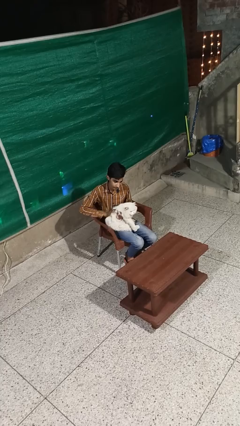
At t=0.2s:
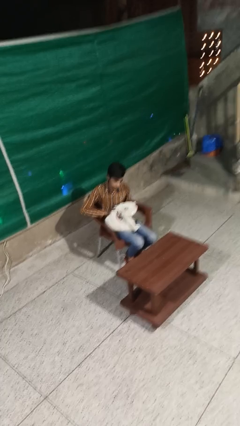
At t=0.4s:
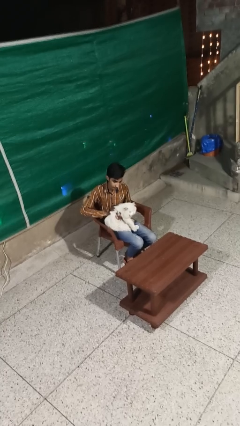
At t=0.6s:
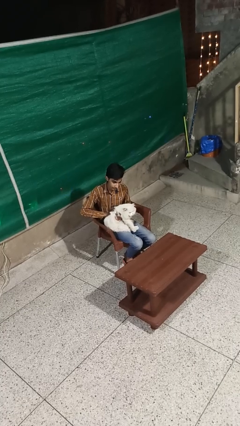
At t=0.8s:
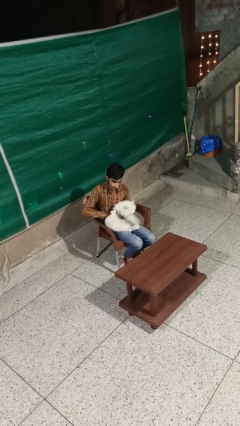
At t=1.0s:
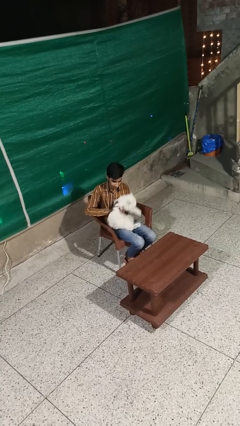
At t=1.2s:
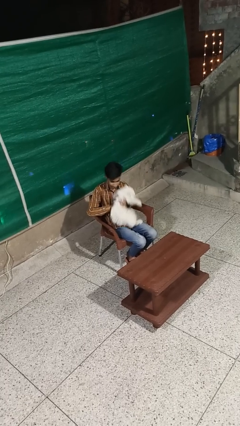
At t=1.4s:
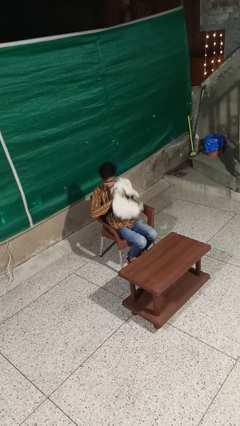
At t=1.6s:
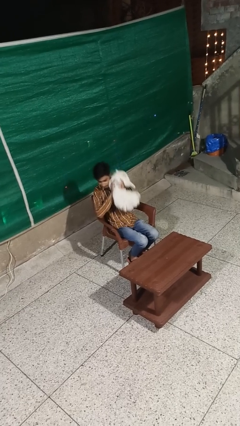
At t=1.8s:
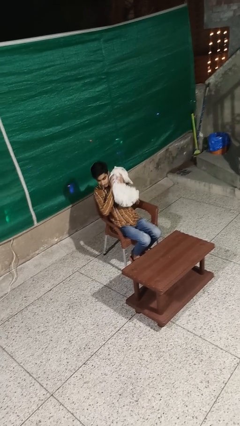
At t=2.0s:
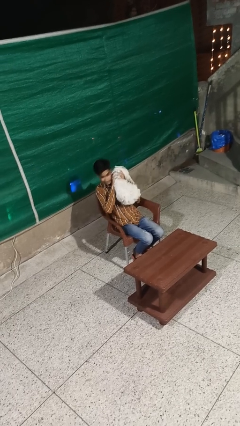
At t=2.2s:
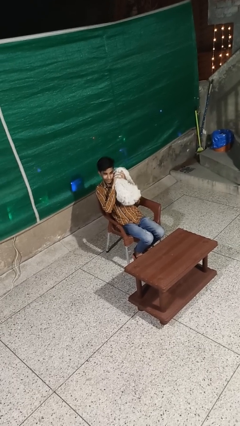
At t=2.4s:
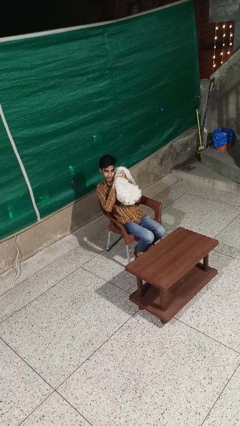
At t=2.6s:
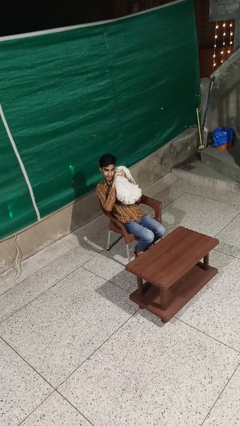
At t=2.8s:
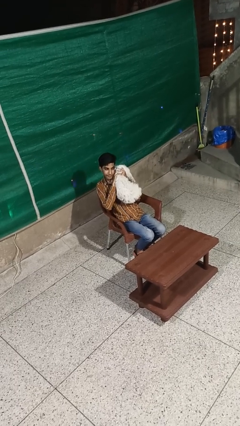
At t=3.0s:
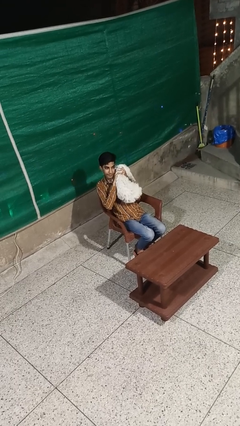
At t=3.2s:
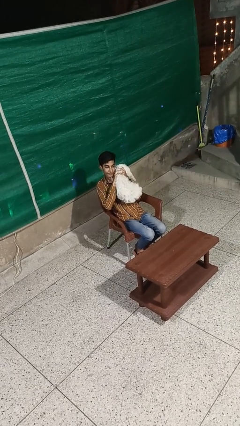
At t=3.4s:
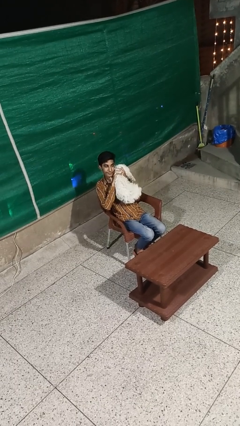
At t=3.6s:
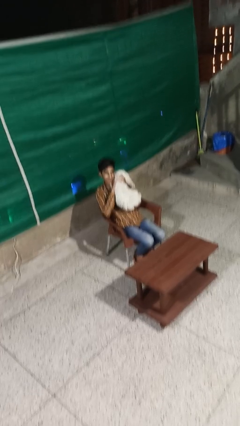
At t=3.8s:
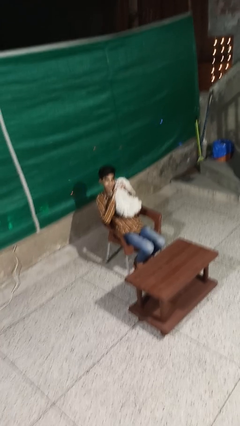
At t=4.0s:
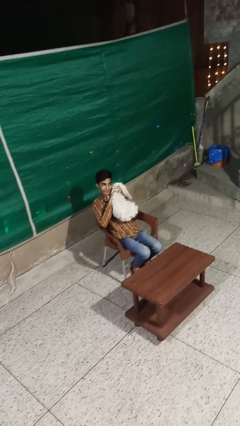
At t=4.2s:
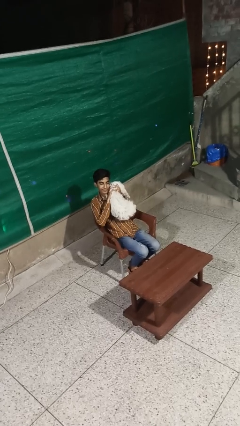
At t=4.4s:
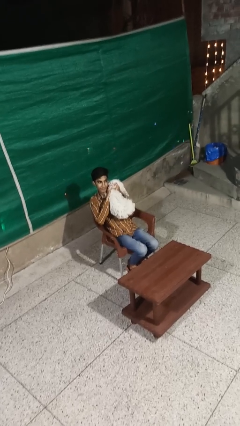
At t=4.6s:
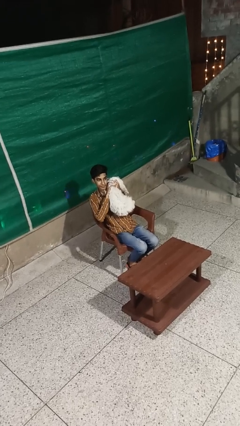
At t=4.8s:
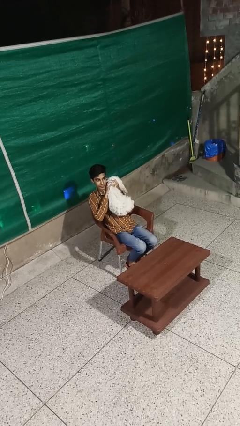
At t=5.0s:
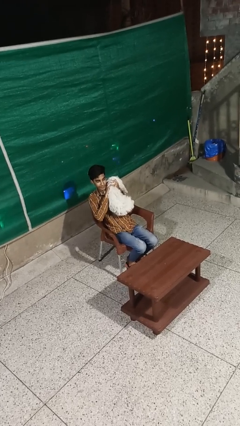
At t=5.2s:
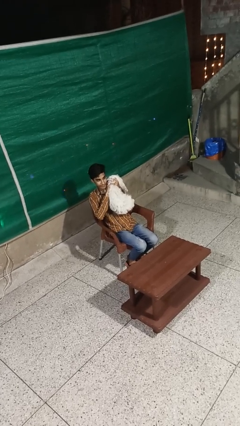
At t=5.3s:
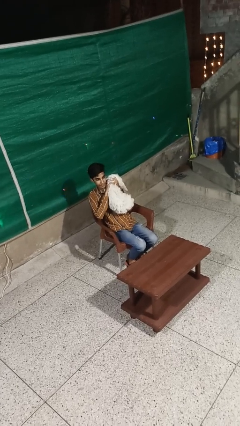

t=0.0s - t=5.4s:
person hugs cat

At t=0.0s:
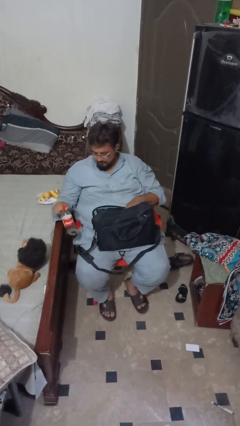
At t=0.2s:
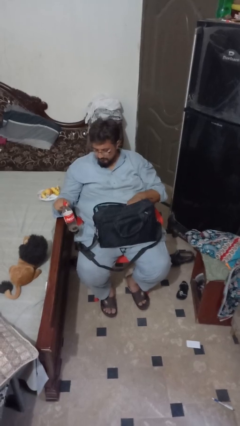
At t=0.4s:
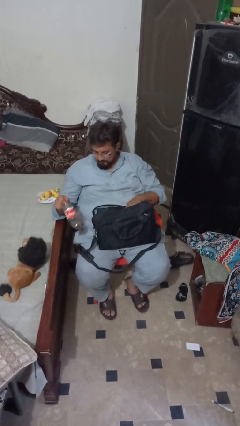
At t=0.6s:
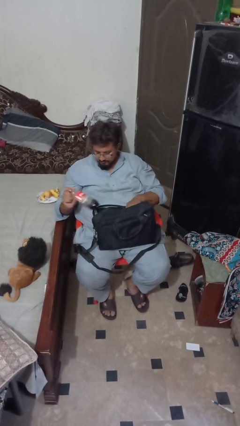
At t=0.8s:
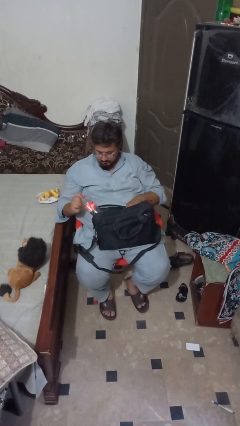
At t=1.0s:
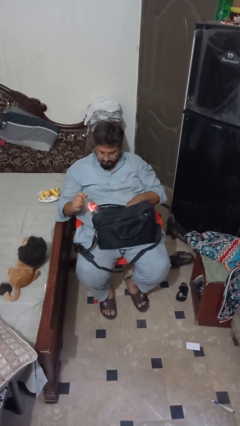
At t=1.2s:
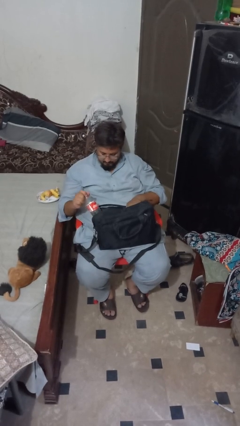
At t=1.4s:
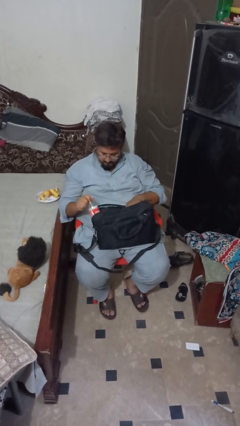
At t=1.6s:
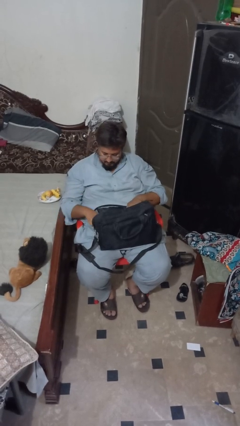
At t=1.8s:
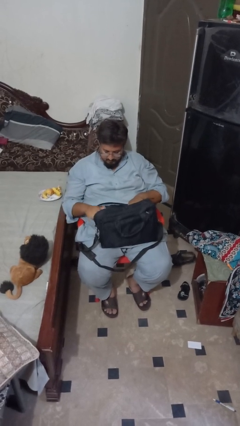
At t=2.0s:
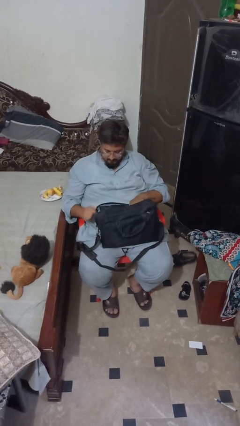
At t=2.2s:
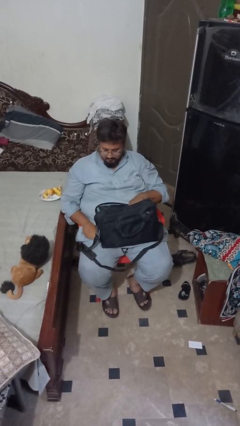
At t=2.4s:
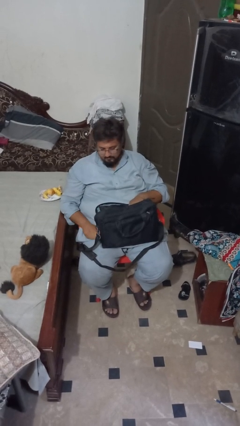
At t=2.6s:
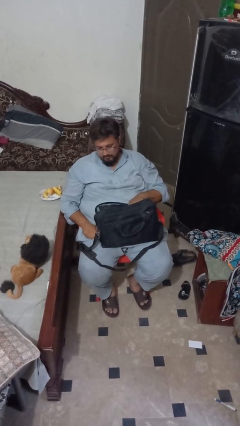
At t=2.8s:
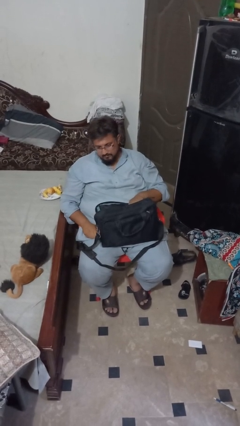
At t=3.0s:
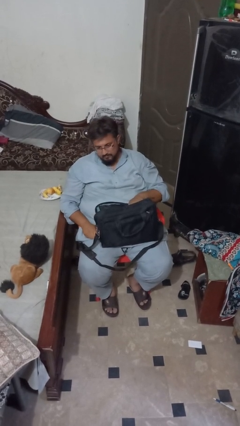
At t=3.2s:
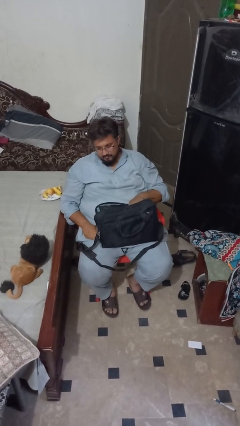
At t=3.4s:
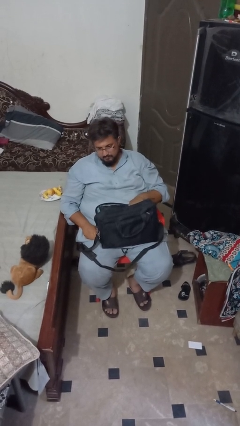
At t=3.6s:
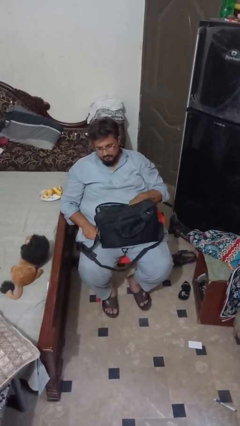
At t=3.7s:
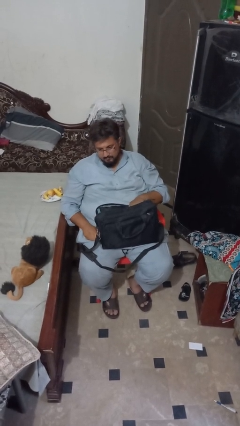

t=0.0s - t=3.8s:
person puts object into bag

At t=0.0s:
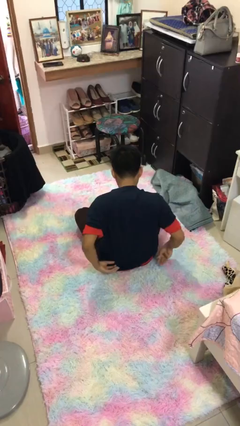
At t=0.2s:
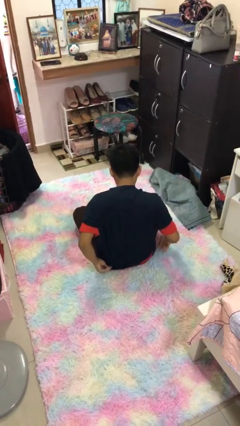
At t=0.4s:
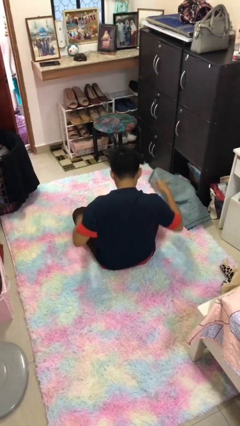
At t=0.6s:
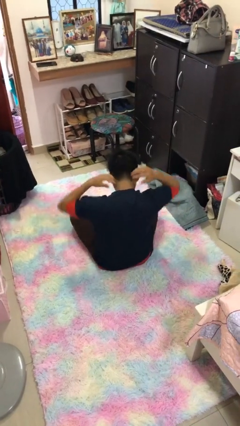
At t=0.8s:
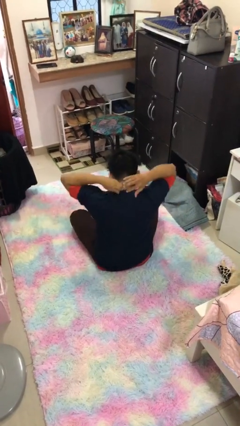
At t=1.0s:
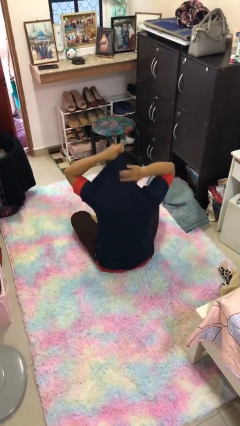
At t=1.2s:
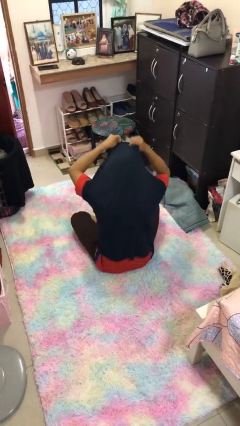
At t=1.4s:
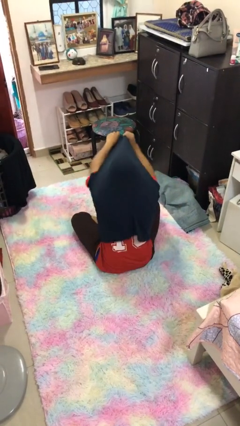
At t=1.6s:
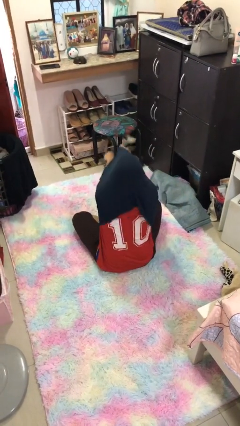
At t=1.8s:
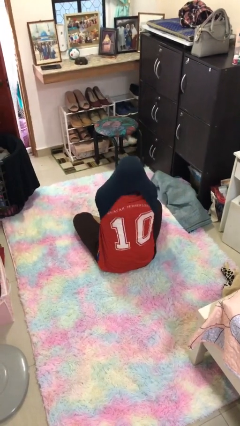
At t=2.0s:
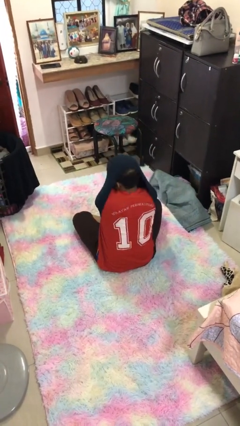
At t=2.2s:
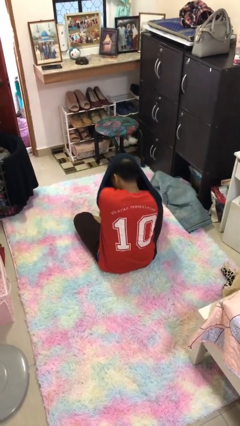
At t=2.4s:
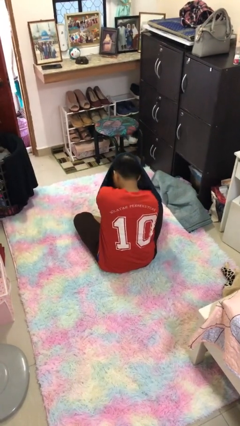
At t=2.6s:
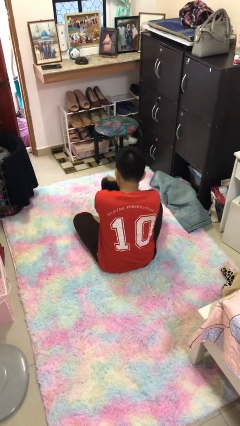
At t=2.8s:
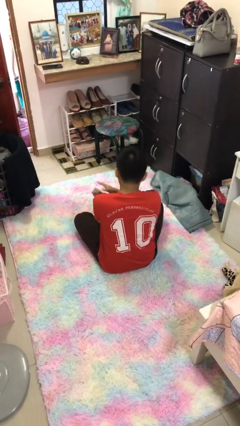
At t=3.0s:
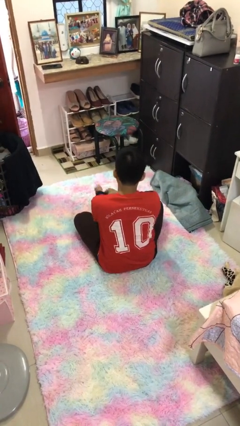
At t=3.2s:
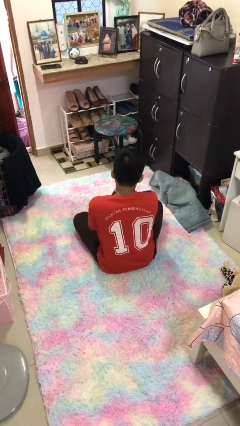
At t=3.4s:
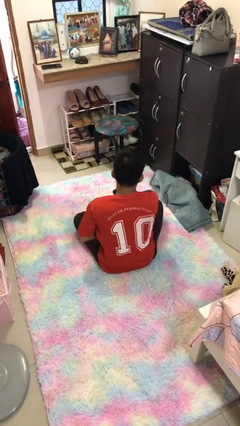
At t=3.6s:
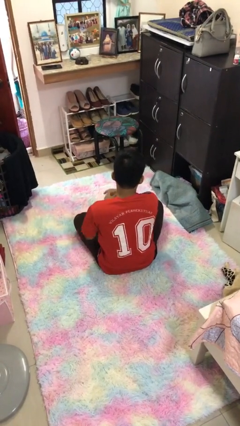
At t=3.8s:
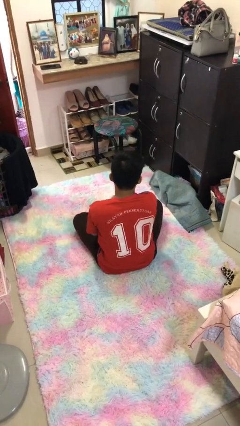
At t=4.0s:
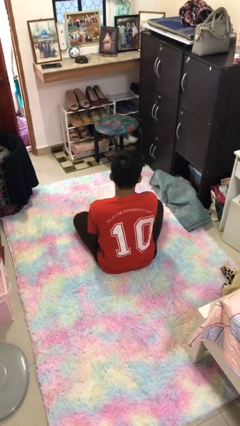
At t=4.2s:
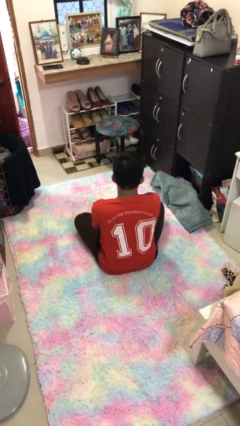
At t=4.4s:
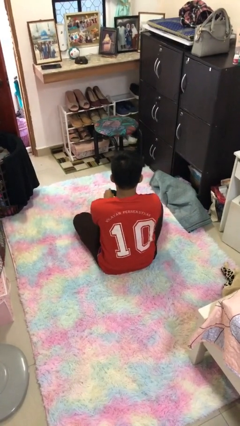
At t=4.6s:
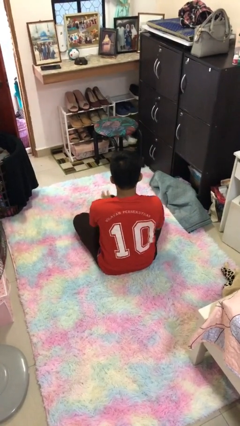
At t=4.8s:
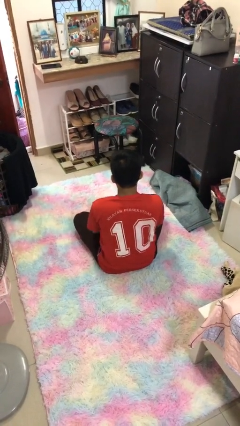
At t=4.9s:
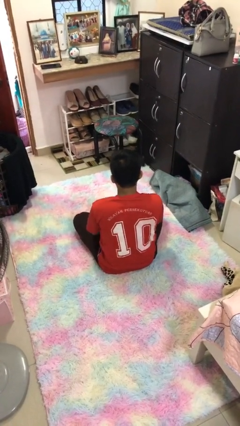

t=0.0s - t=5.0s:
person takes off shirt

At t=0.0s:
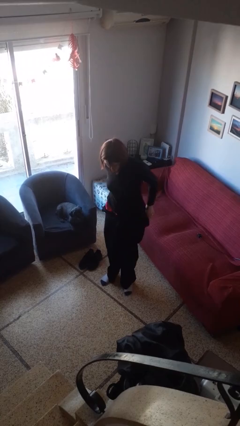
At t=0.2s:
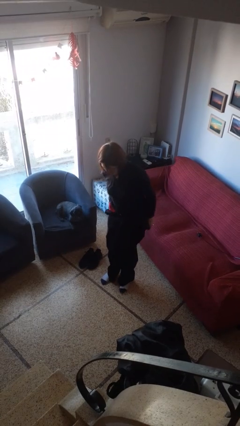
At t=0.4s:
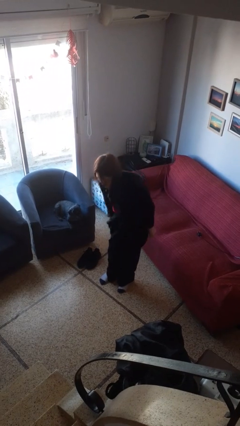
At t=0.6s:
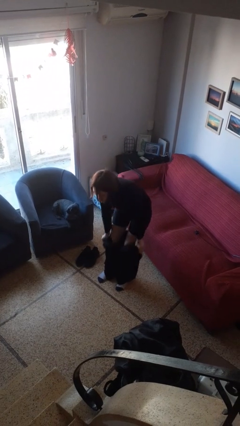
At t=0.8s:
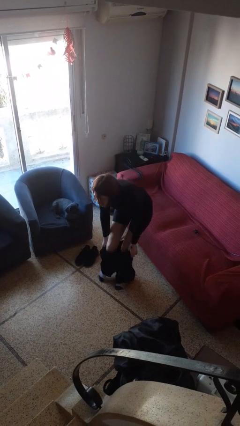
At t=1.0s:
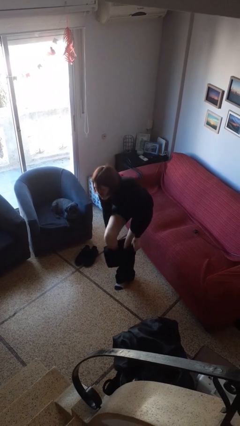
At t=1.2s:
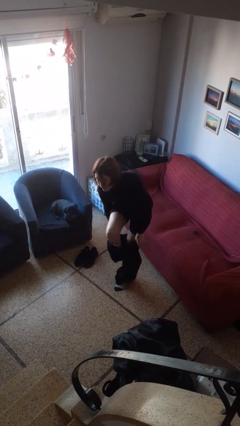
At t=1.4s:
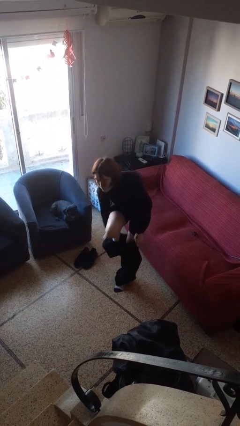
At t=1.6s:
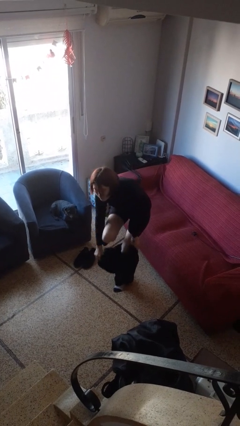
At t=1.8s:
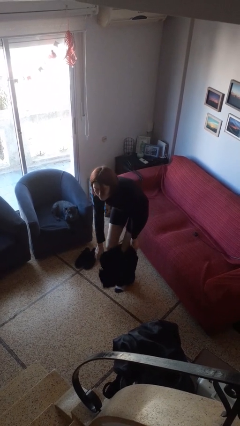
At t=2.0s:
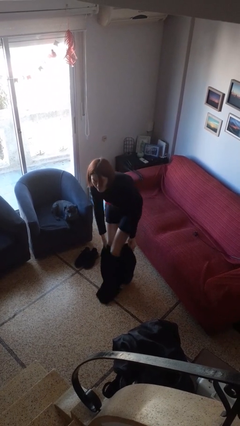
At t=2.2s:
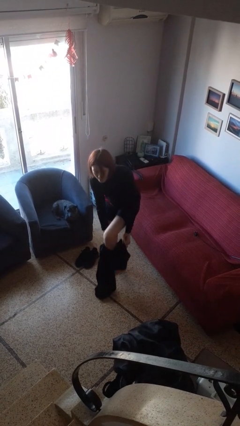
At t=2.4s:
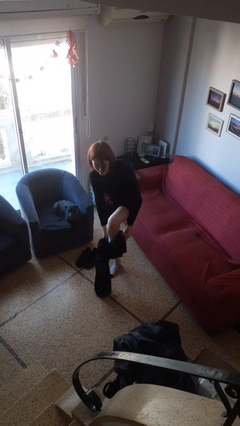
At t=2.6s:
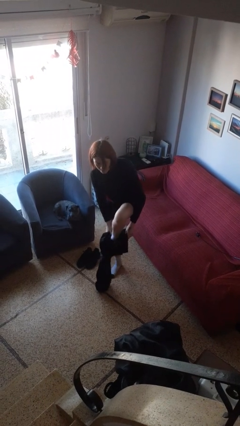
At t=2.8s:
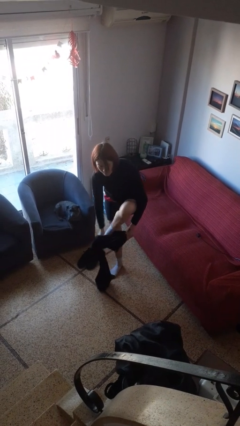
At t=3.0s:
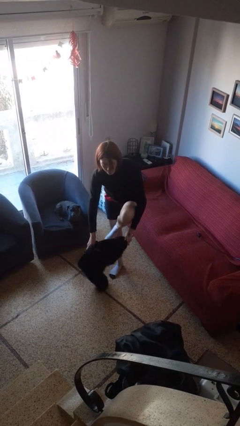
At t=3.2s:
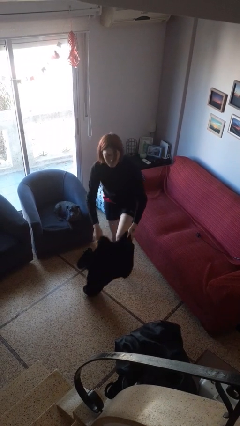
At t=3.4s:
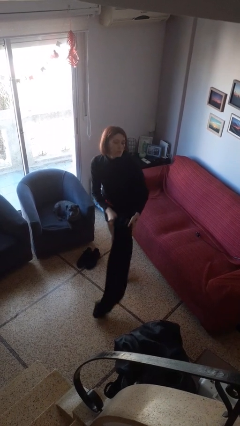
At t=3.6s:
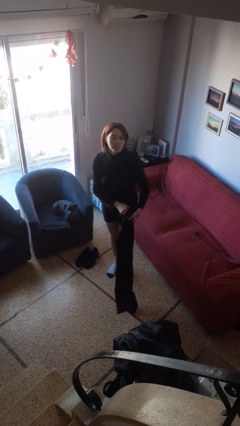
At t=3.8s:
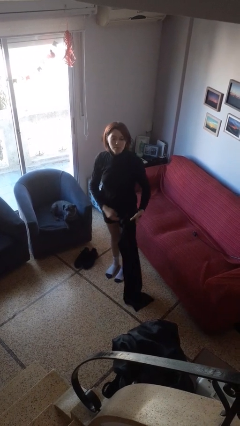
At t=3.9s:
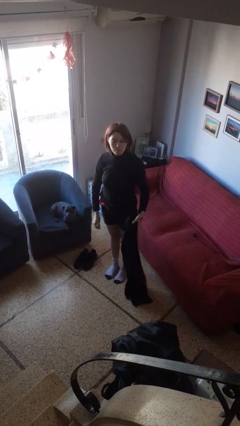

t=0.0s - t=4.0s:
person takes off pants
